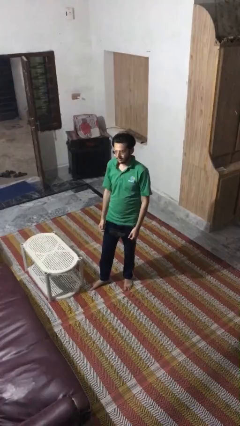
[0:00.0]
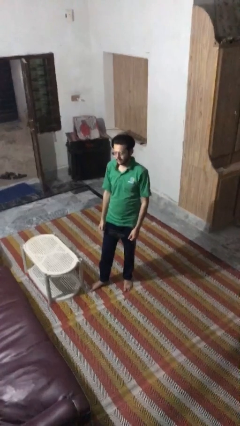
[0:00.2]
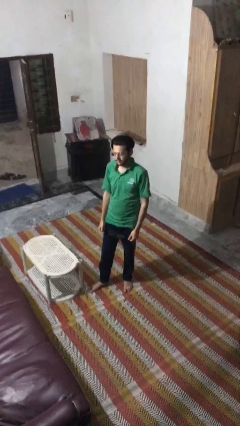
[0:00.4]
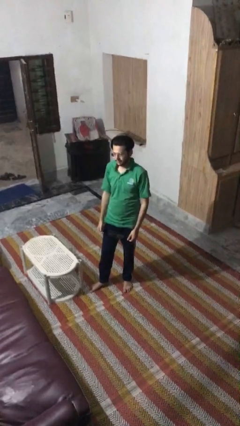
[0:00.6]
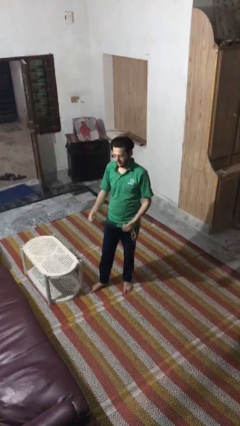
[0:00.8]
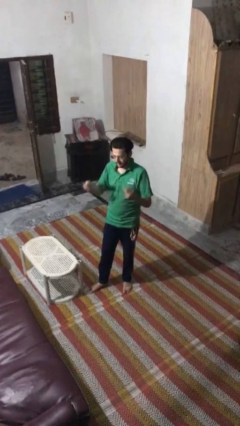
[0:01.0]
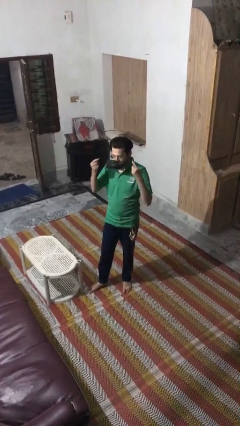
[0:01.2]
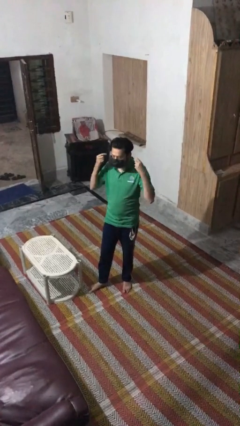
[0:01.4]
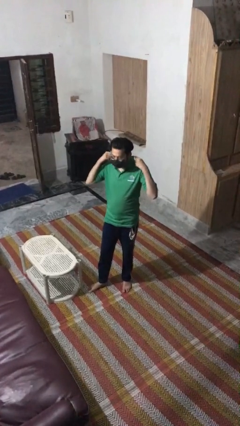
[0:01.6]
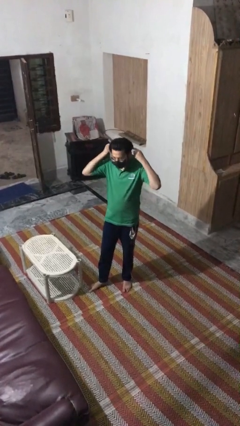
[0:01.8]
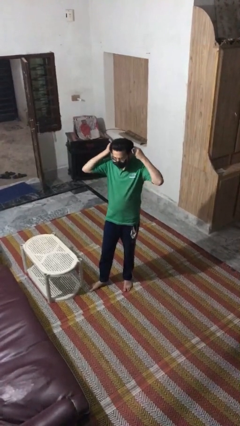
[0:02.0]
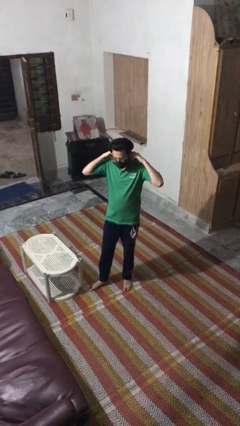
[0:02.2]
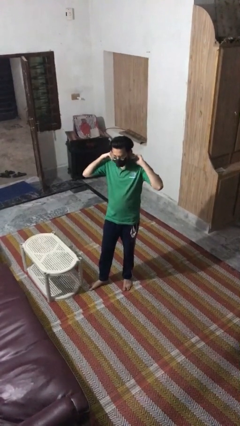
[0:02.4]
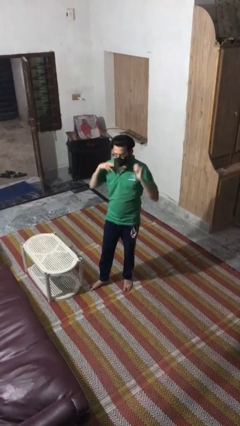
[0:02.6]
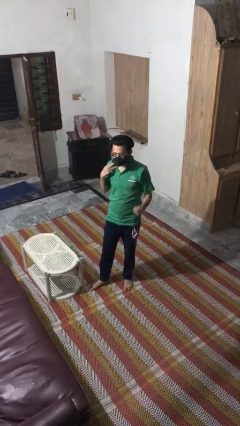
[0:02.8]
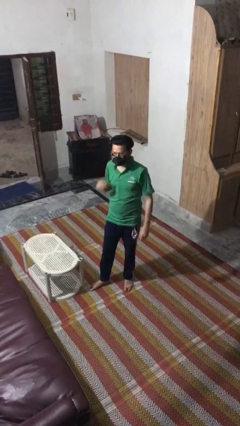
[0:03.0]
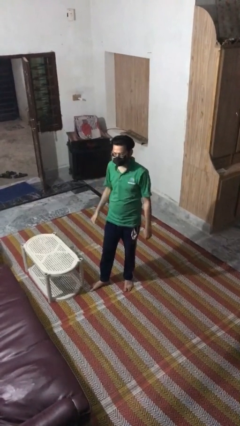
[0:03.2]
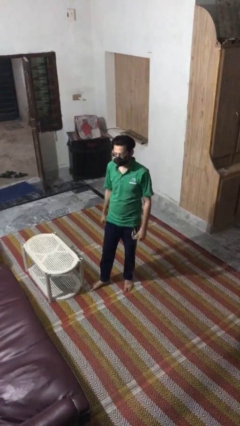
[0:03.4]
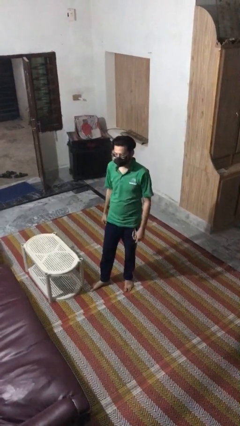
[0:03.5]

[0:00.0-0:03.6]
person puts on facemask

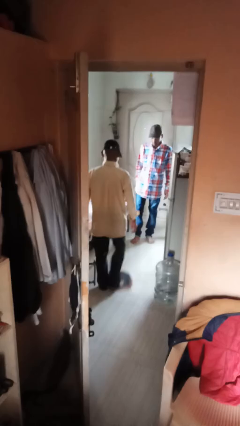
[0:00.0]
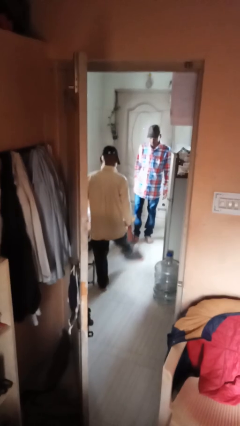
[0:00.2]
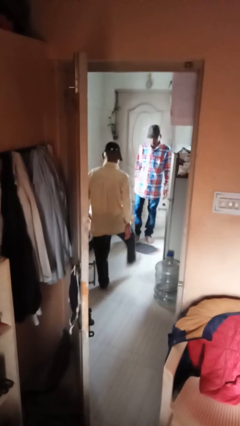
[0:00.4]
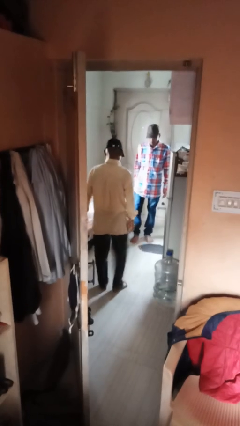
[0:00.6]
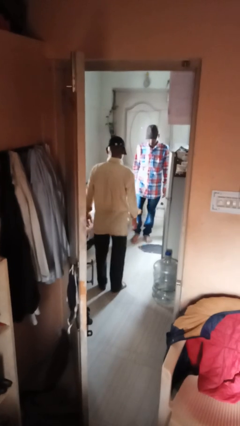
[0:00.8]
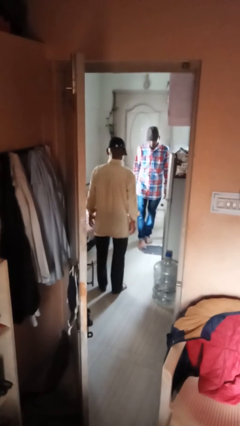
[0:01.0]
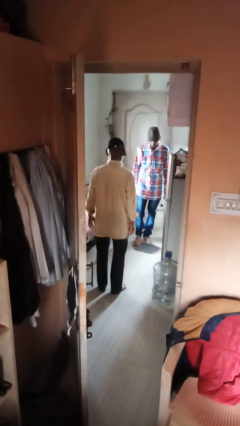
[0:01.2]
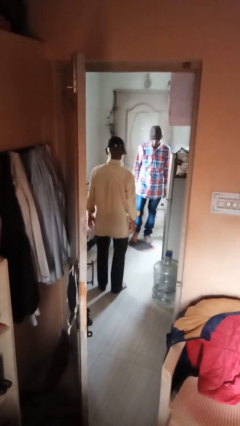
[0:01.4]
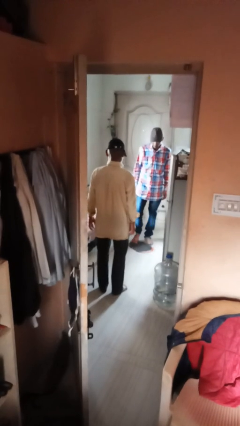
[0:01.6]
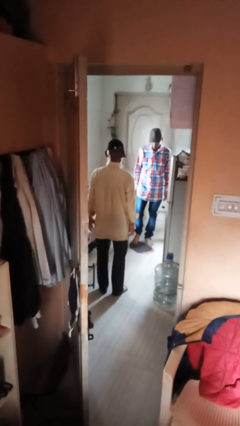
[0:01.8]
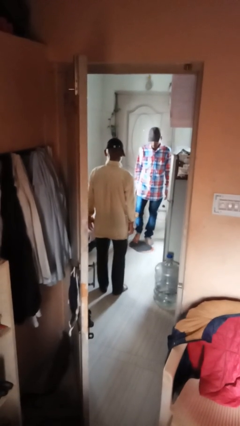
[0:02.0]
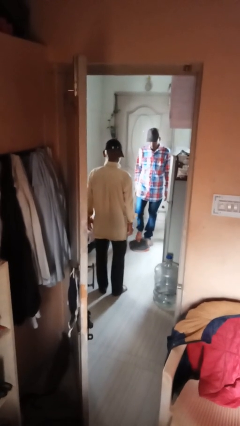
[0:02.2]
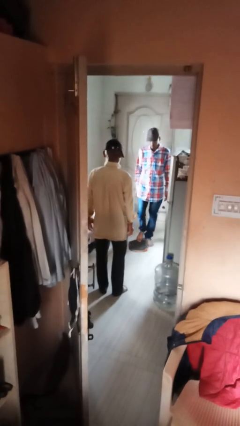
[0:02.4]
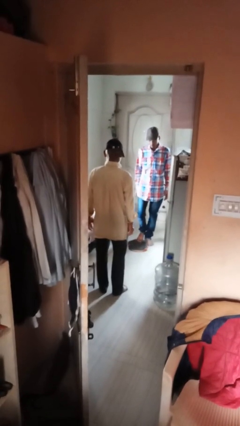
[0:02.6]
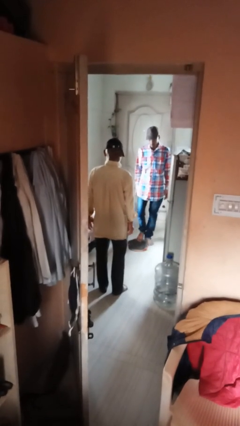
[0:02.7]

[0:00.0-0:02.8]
person kicks object to person

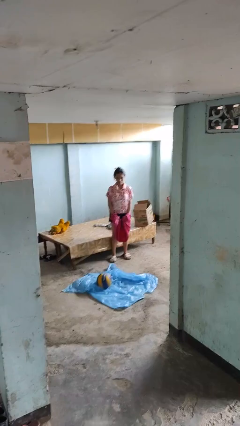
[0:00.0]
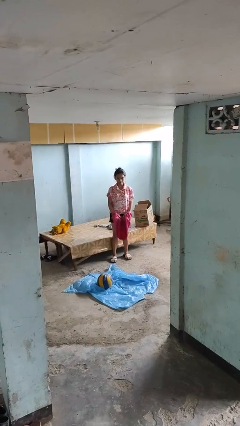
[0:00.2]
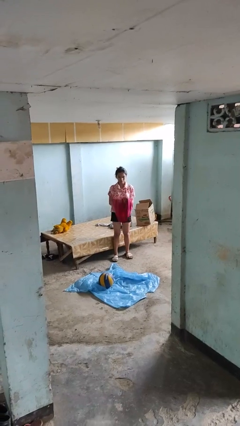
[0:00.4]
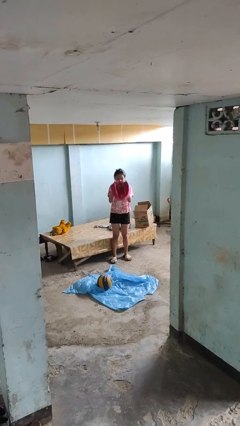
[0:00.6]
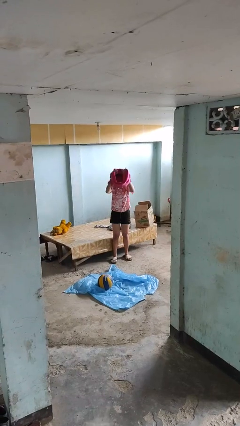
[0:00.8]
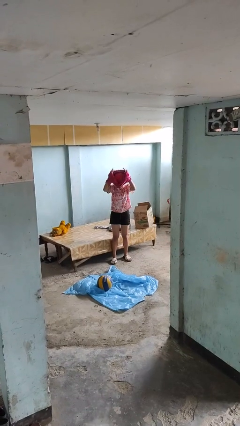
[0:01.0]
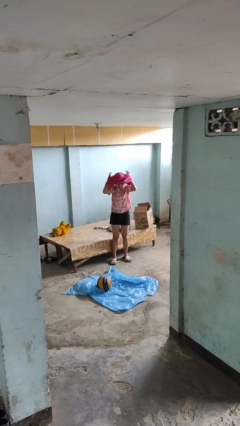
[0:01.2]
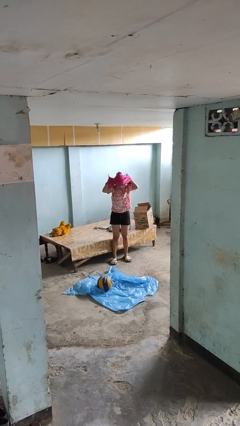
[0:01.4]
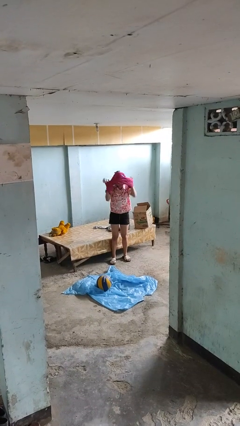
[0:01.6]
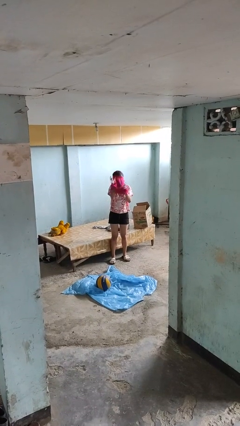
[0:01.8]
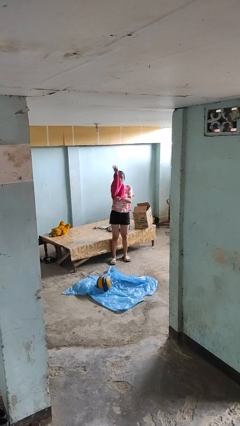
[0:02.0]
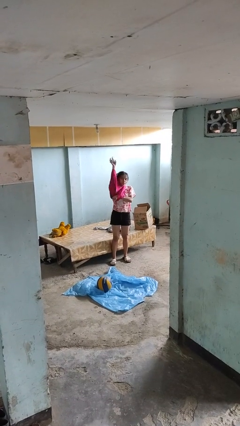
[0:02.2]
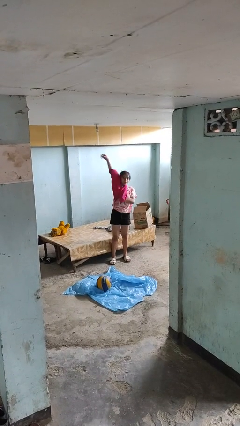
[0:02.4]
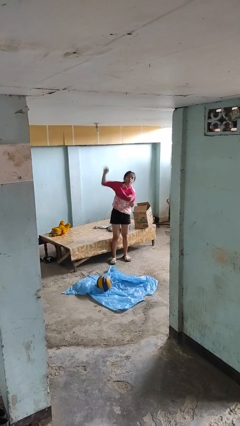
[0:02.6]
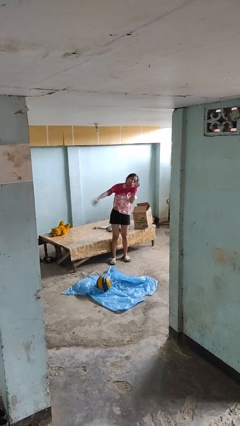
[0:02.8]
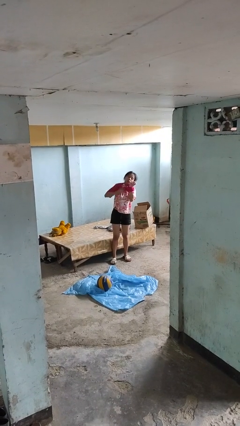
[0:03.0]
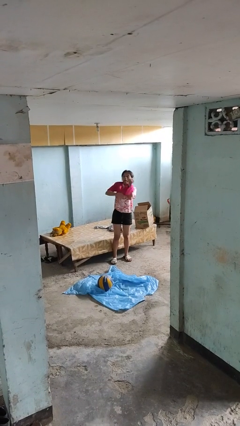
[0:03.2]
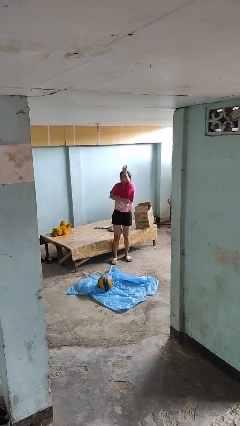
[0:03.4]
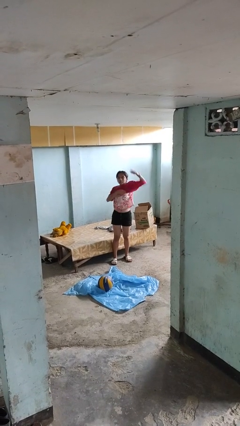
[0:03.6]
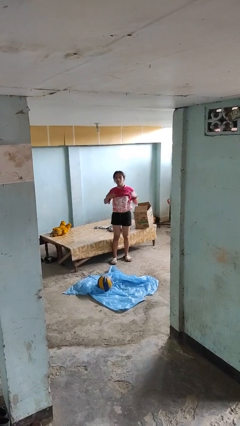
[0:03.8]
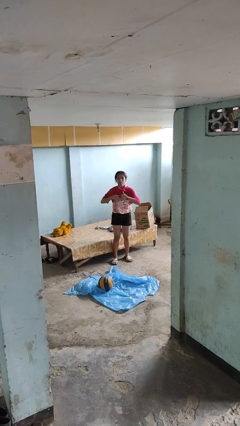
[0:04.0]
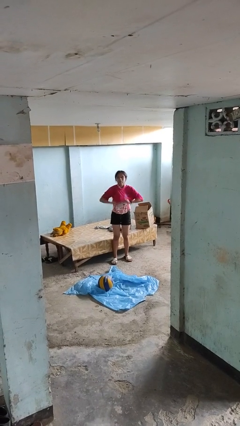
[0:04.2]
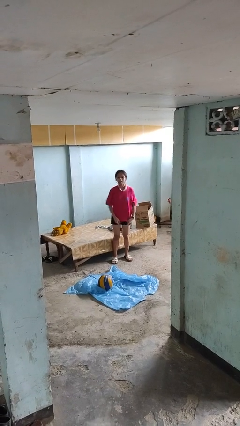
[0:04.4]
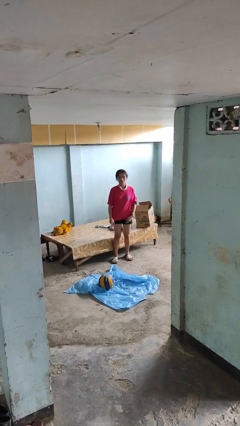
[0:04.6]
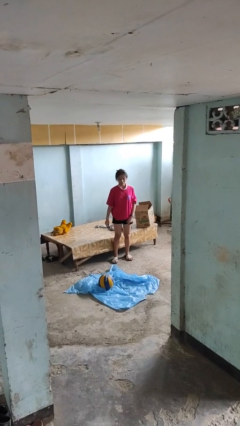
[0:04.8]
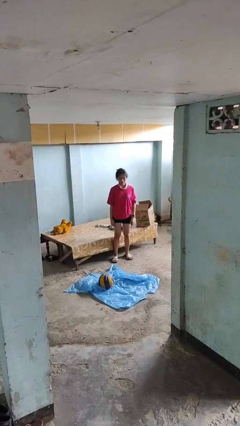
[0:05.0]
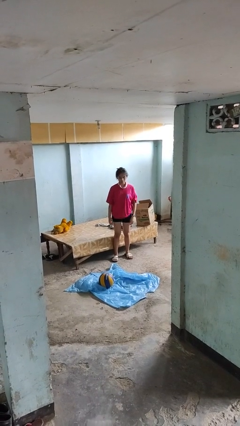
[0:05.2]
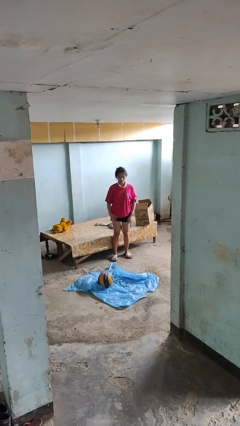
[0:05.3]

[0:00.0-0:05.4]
person puts on shirt

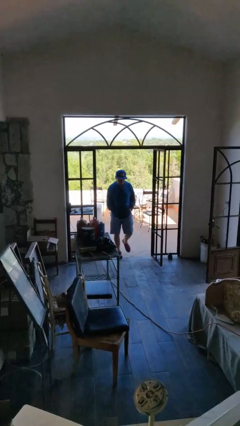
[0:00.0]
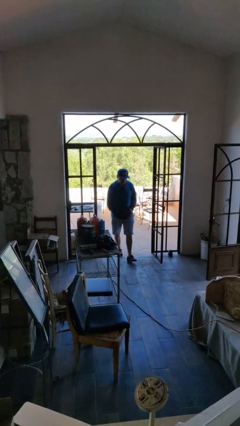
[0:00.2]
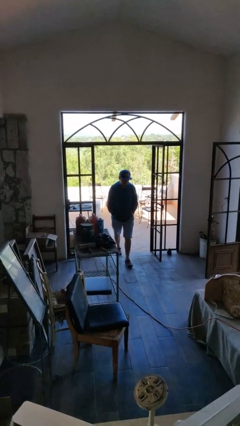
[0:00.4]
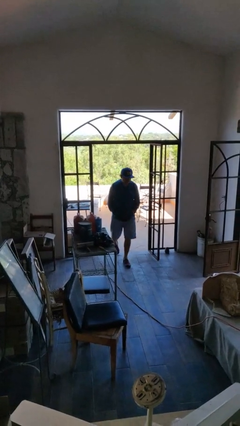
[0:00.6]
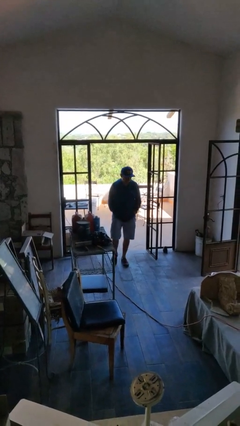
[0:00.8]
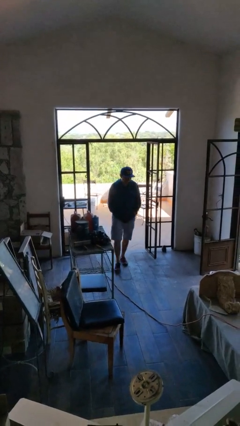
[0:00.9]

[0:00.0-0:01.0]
person enters scene through structure

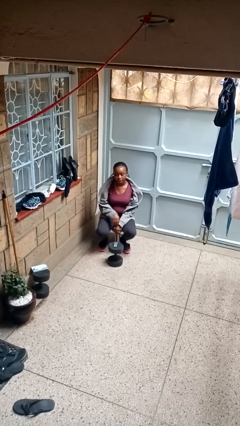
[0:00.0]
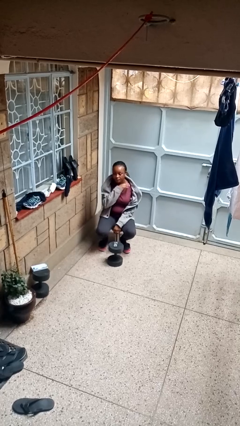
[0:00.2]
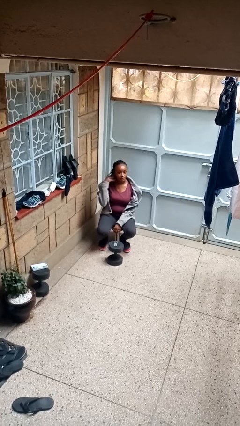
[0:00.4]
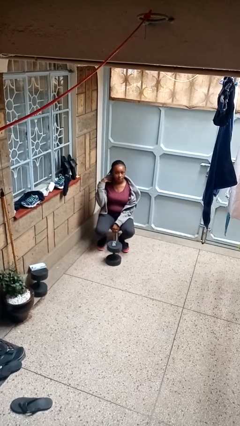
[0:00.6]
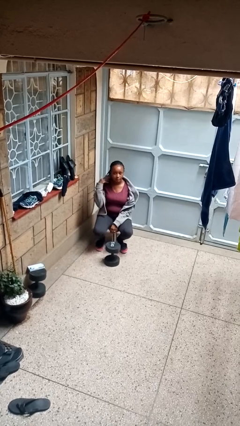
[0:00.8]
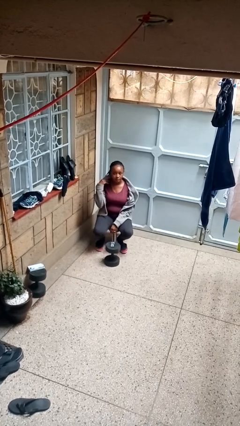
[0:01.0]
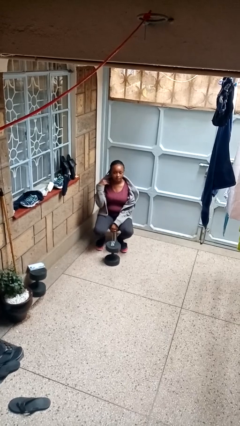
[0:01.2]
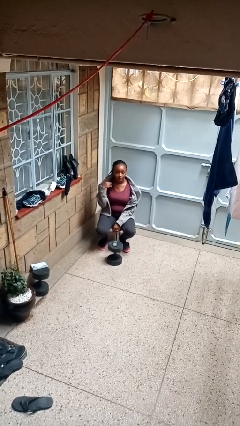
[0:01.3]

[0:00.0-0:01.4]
person gestures cut

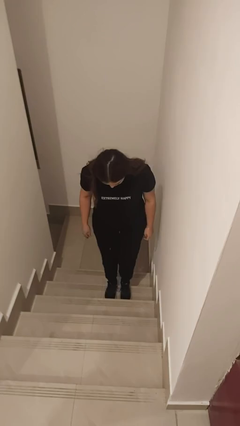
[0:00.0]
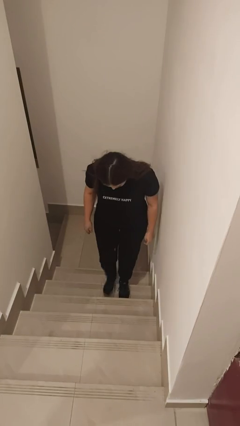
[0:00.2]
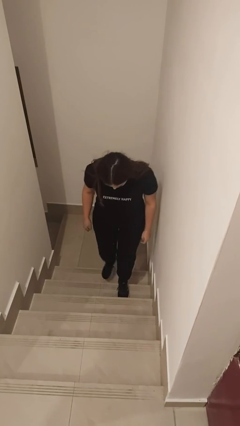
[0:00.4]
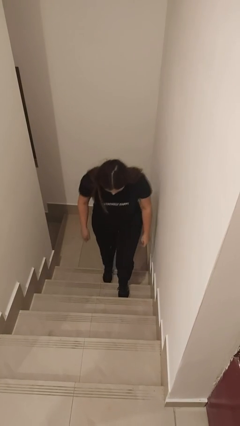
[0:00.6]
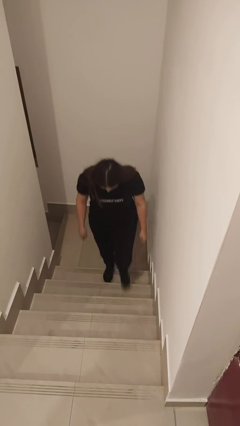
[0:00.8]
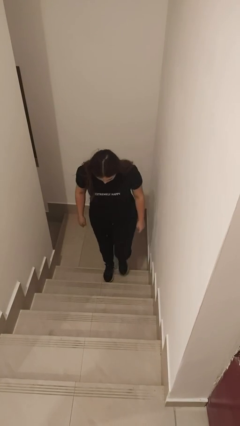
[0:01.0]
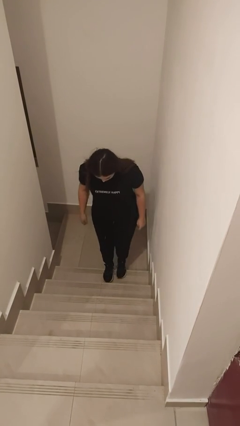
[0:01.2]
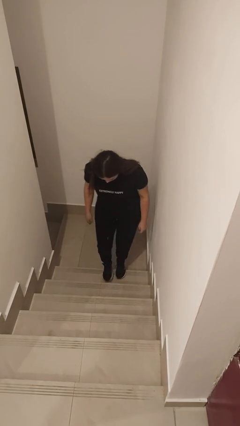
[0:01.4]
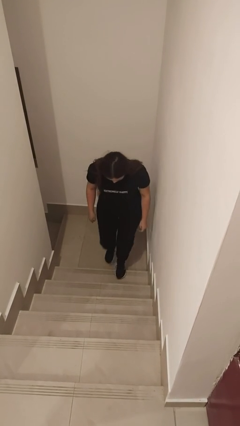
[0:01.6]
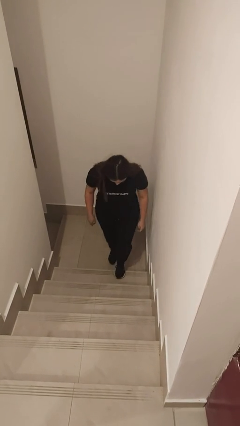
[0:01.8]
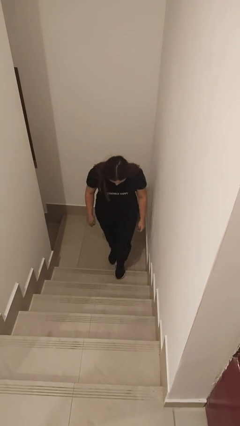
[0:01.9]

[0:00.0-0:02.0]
person climbs down stairs

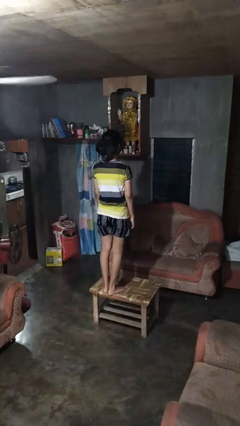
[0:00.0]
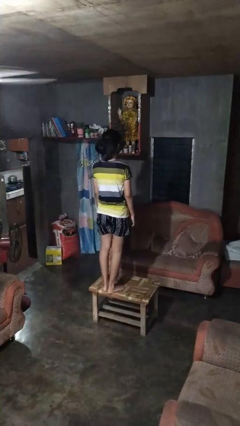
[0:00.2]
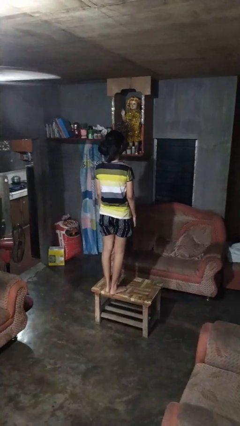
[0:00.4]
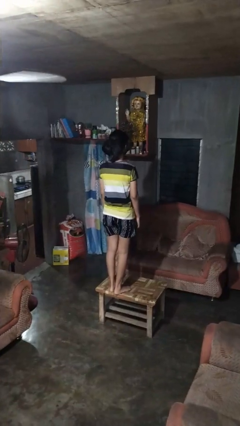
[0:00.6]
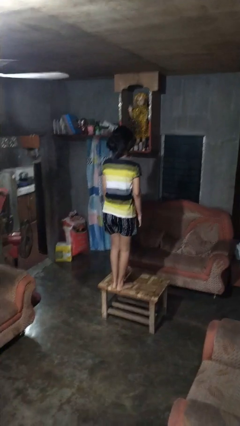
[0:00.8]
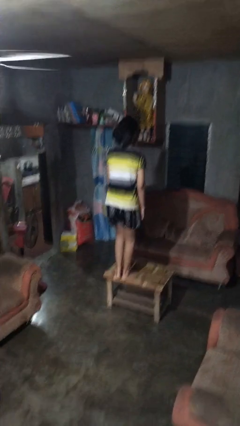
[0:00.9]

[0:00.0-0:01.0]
person climbs off table
